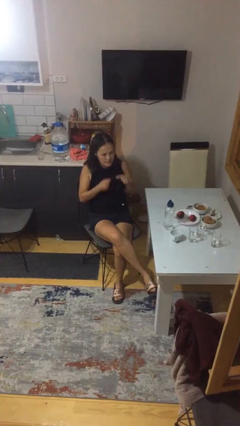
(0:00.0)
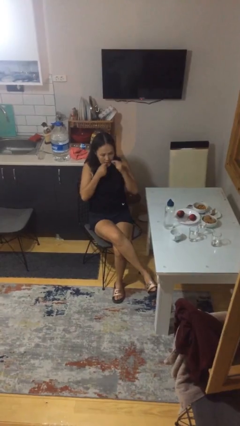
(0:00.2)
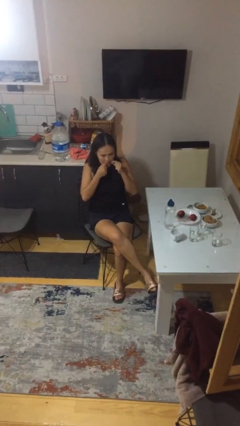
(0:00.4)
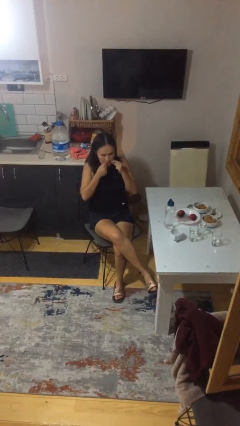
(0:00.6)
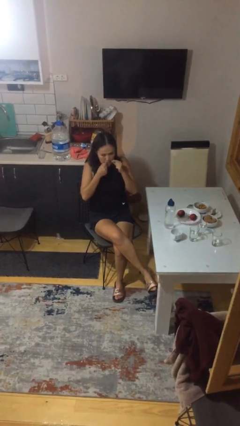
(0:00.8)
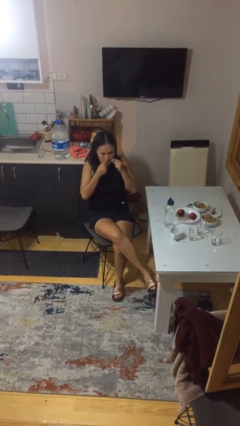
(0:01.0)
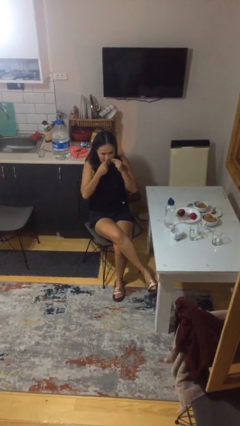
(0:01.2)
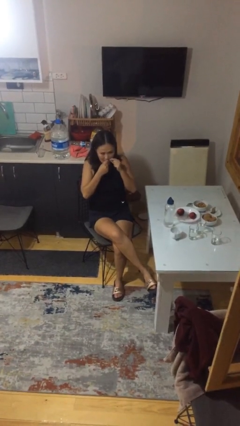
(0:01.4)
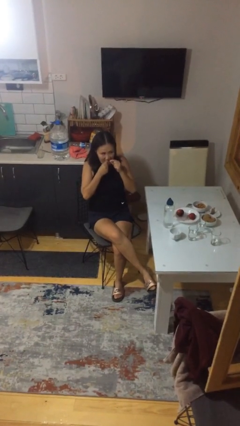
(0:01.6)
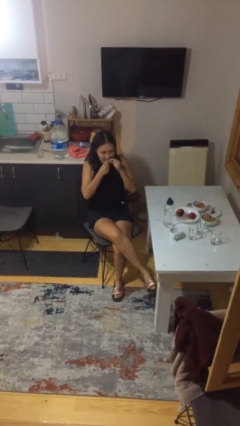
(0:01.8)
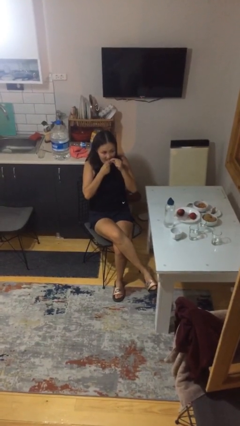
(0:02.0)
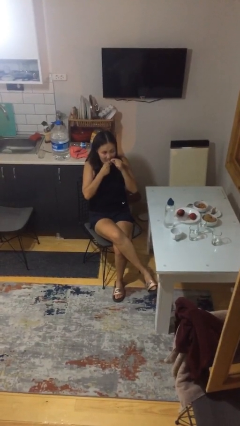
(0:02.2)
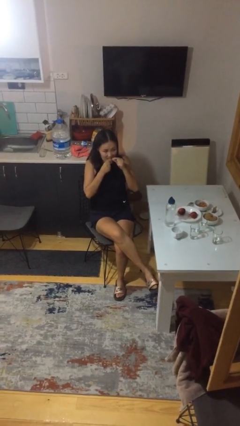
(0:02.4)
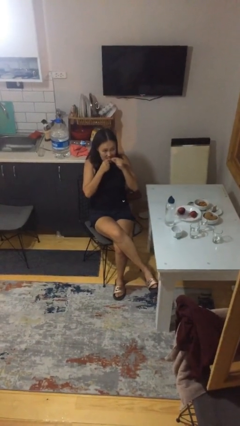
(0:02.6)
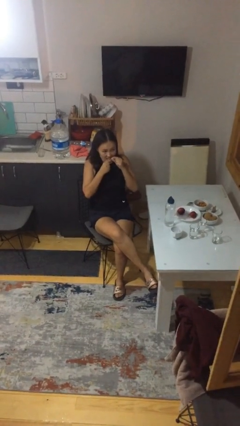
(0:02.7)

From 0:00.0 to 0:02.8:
person flosses

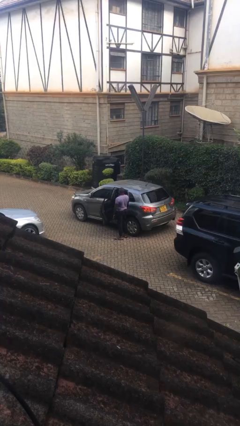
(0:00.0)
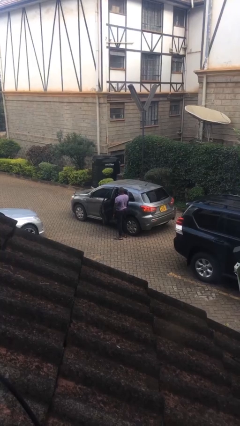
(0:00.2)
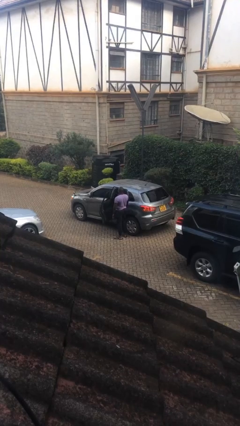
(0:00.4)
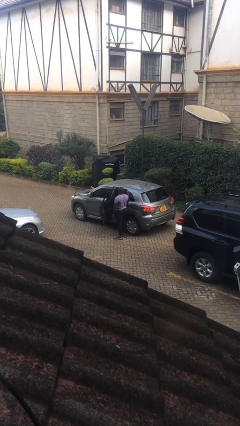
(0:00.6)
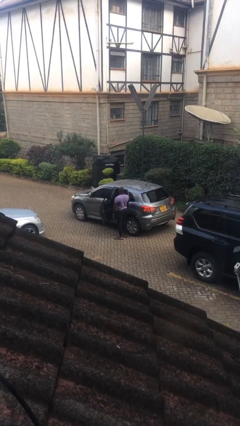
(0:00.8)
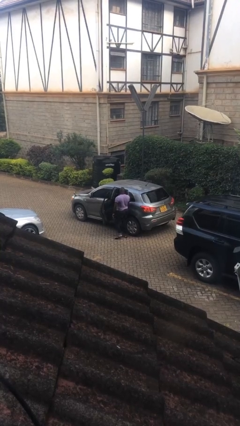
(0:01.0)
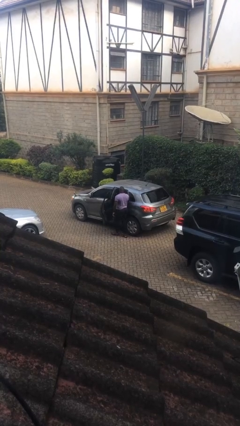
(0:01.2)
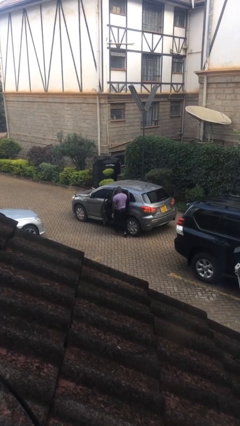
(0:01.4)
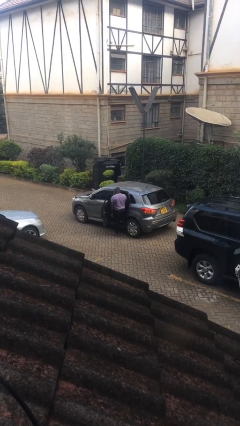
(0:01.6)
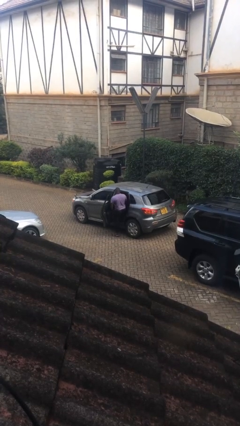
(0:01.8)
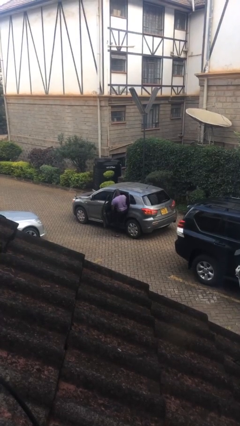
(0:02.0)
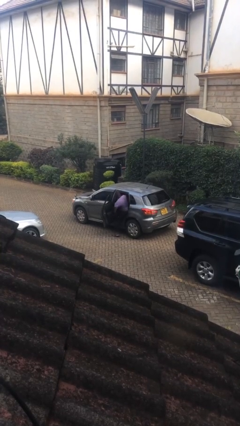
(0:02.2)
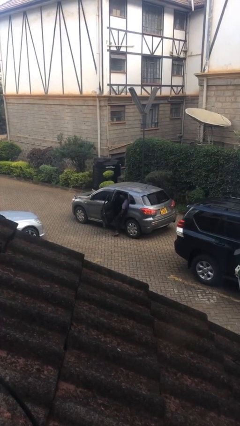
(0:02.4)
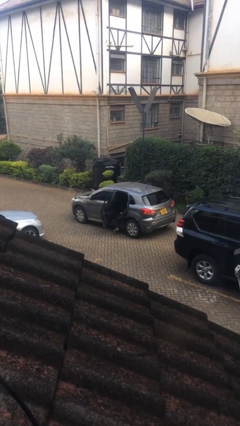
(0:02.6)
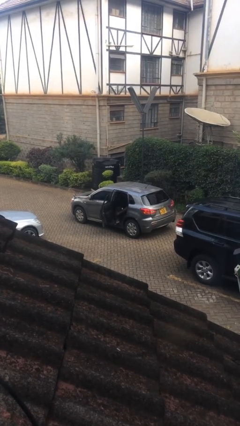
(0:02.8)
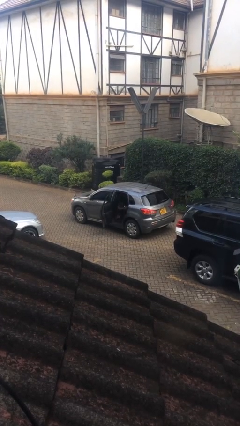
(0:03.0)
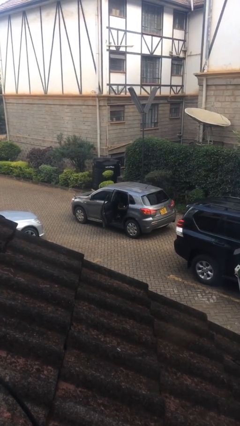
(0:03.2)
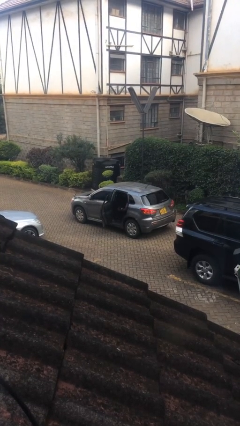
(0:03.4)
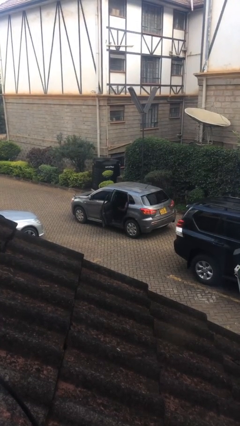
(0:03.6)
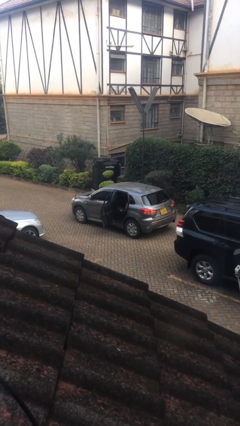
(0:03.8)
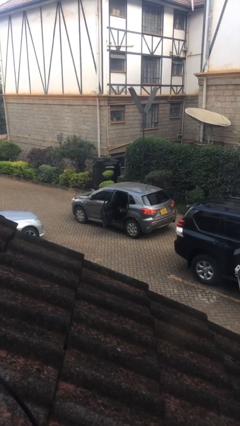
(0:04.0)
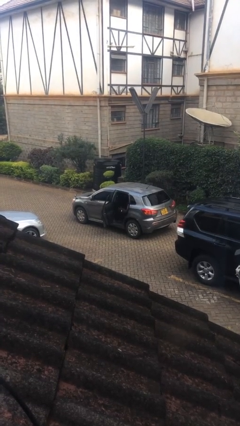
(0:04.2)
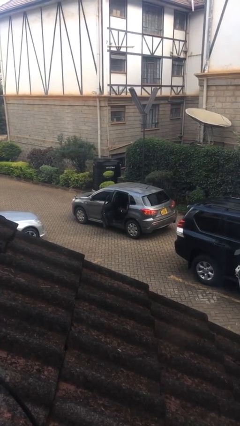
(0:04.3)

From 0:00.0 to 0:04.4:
person enters car

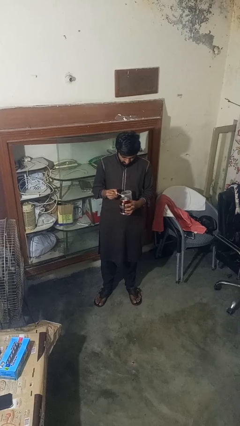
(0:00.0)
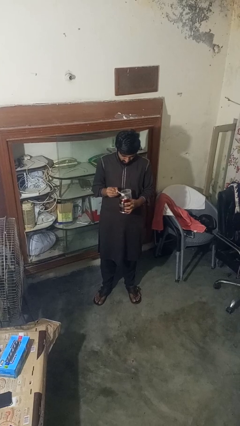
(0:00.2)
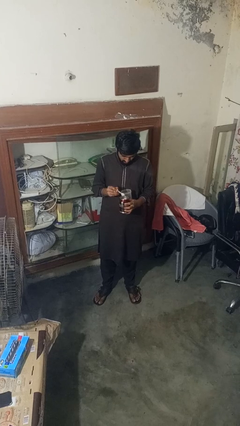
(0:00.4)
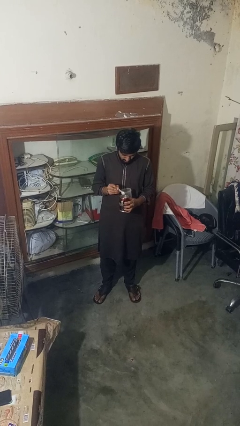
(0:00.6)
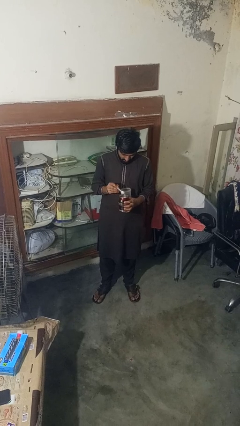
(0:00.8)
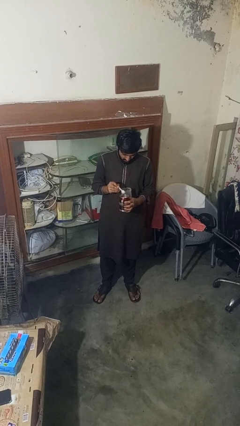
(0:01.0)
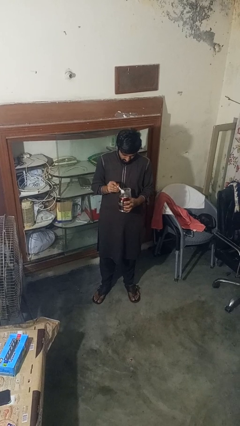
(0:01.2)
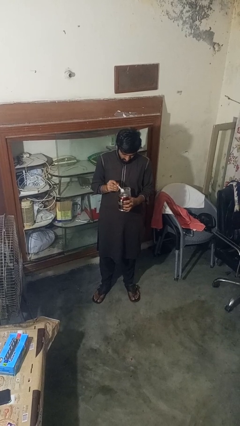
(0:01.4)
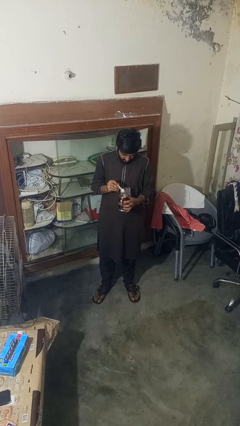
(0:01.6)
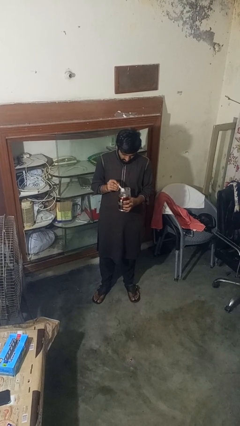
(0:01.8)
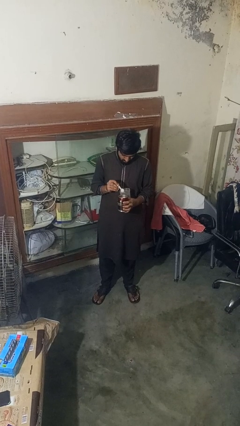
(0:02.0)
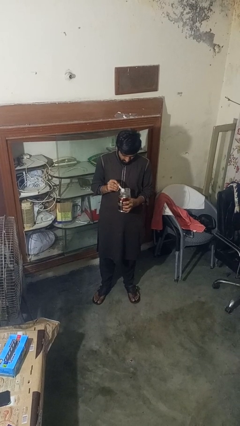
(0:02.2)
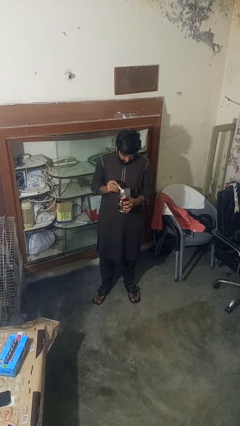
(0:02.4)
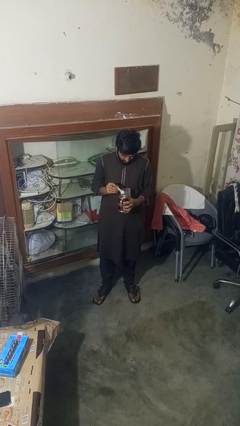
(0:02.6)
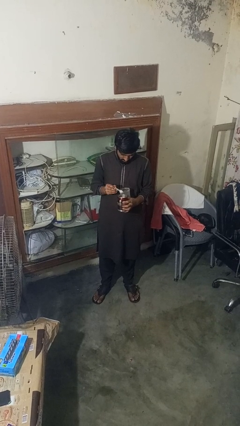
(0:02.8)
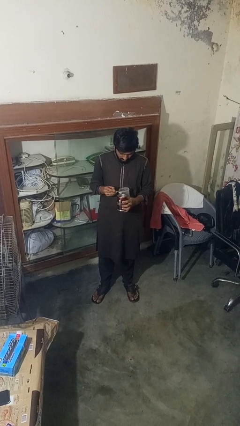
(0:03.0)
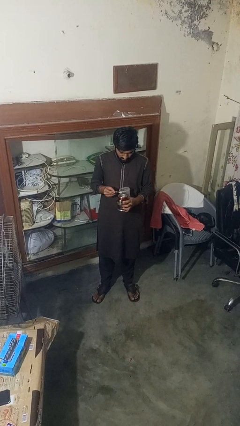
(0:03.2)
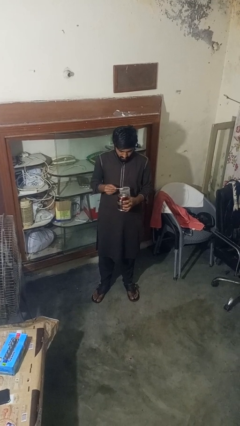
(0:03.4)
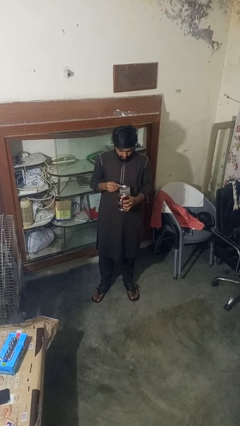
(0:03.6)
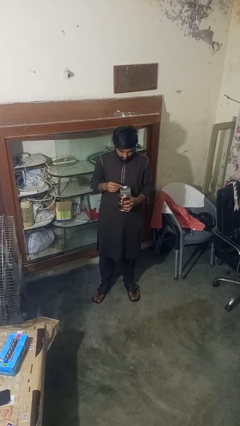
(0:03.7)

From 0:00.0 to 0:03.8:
person pours coffee into mug

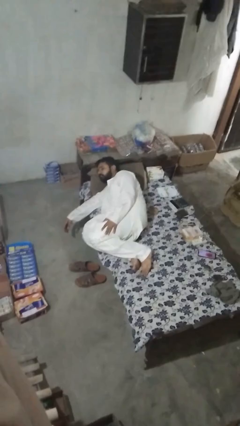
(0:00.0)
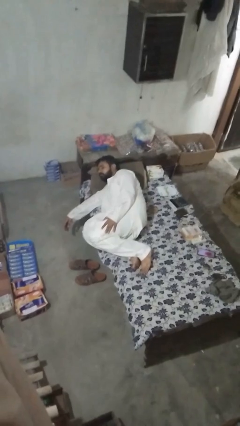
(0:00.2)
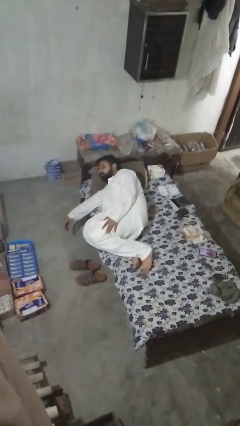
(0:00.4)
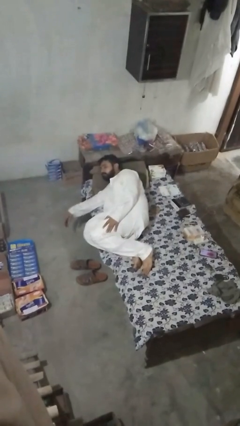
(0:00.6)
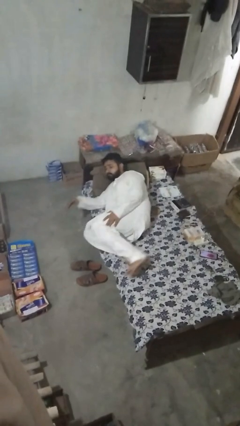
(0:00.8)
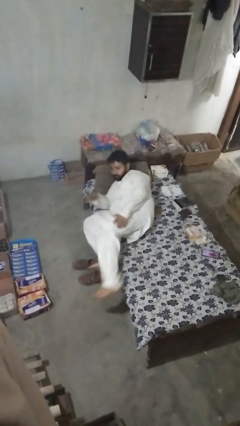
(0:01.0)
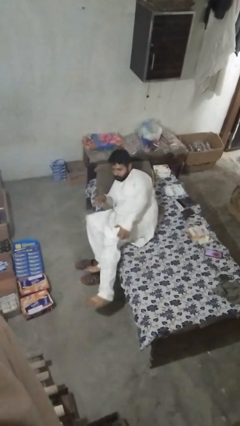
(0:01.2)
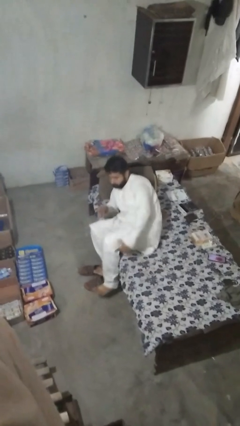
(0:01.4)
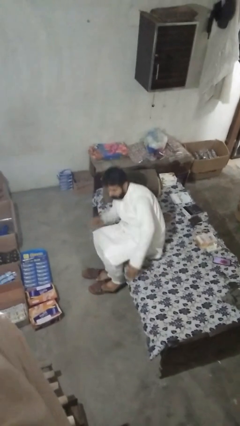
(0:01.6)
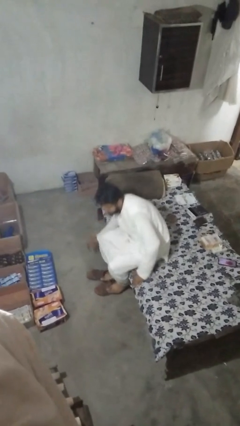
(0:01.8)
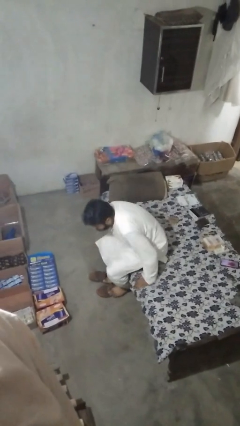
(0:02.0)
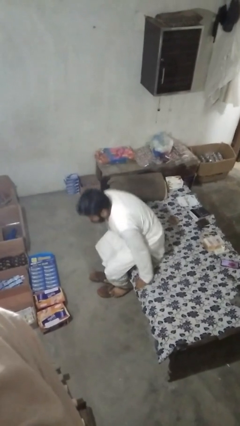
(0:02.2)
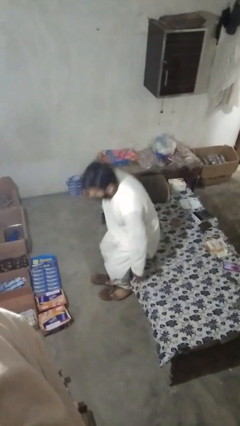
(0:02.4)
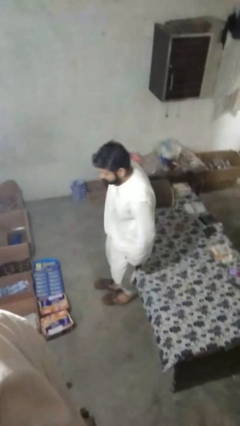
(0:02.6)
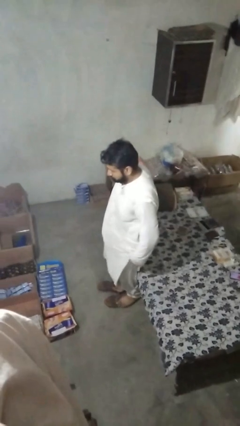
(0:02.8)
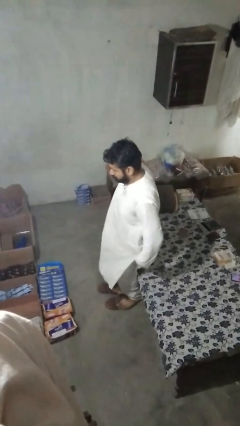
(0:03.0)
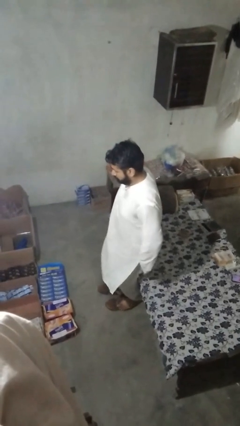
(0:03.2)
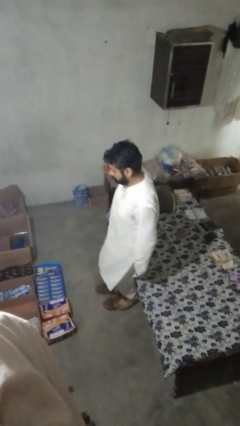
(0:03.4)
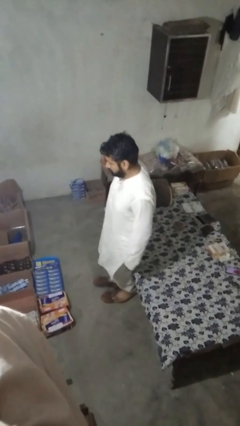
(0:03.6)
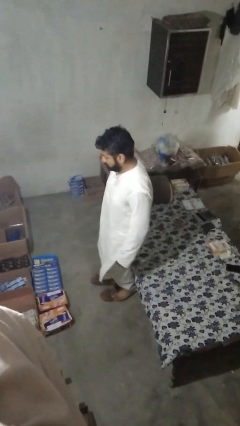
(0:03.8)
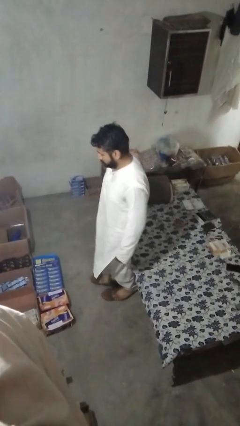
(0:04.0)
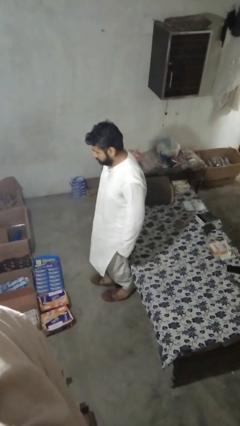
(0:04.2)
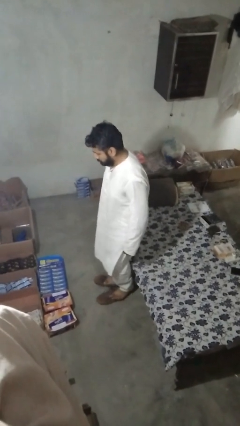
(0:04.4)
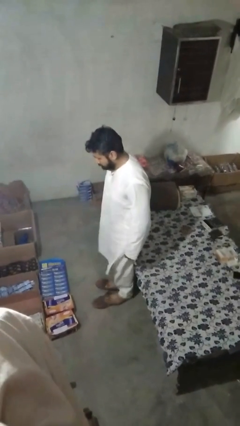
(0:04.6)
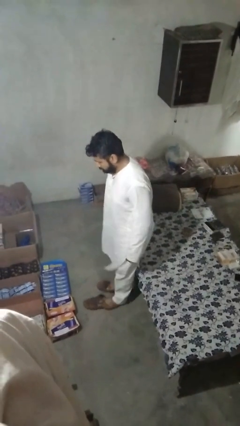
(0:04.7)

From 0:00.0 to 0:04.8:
person stands up

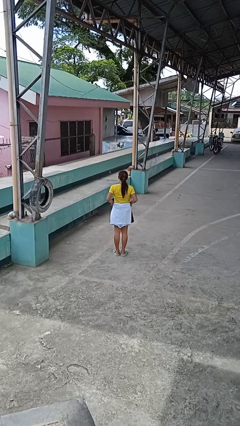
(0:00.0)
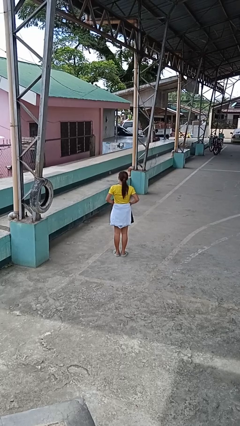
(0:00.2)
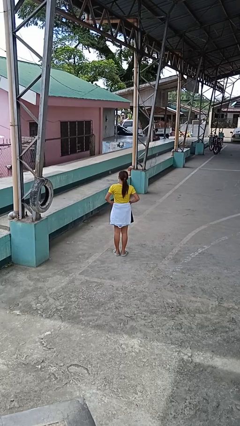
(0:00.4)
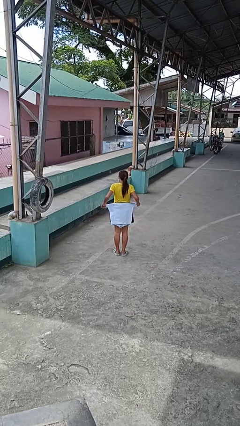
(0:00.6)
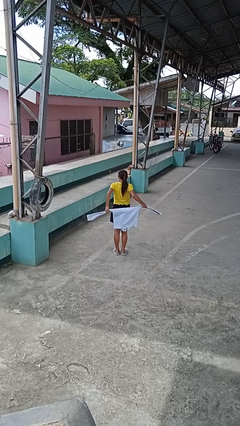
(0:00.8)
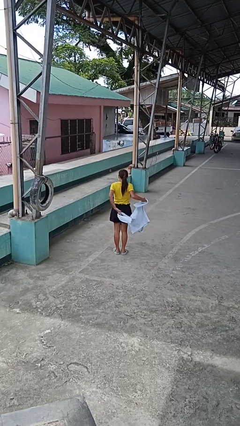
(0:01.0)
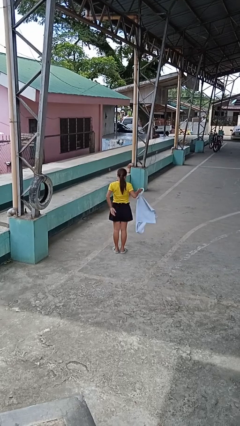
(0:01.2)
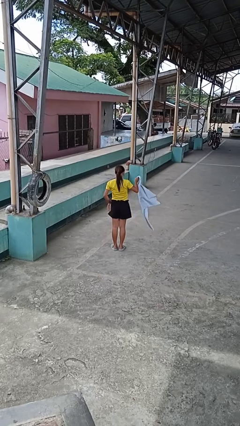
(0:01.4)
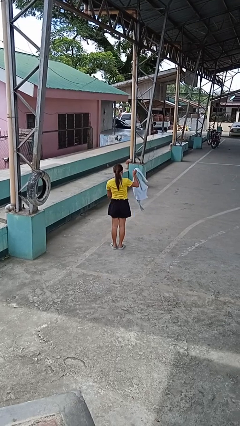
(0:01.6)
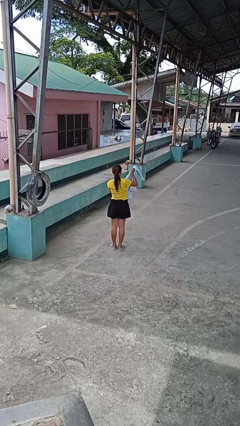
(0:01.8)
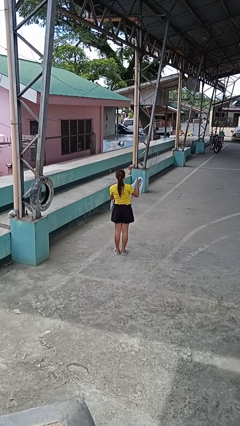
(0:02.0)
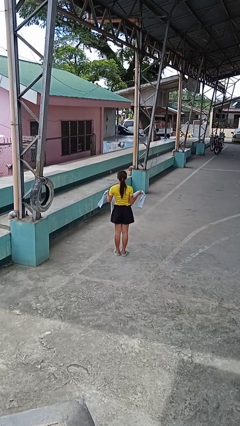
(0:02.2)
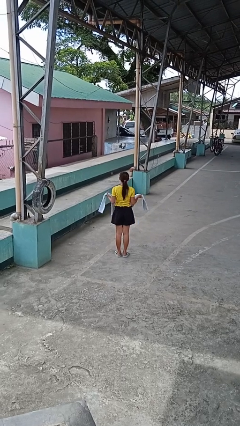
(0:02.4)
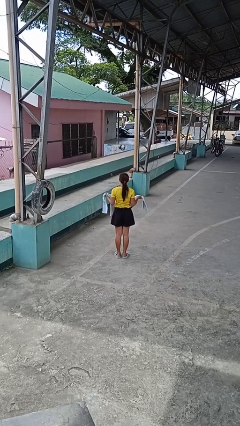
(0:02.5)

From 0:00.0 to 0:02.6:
person unties jacket around waist
